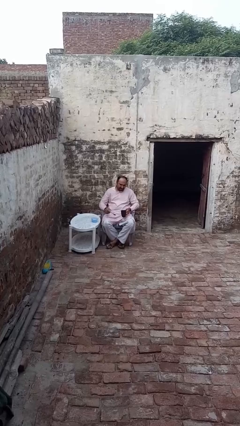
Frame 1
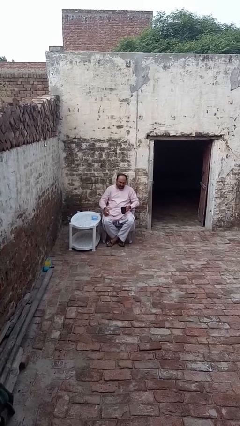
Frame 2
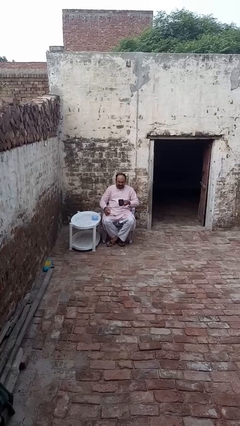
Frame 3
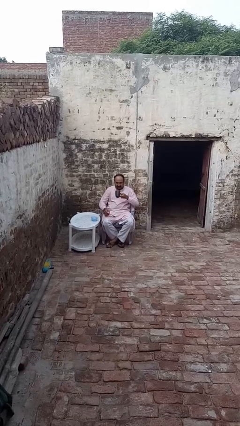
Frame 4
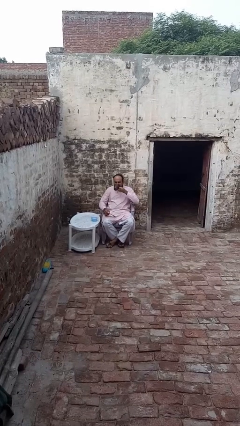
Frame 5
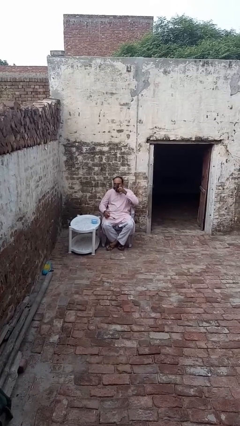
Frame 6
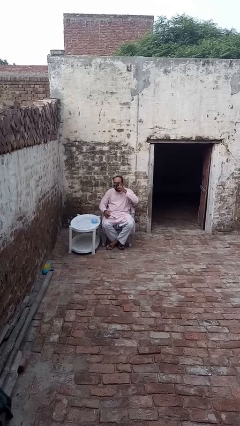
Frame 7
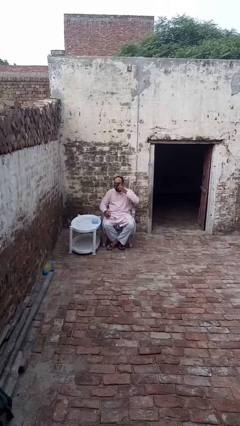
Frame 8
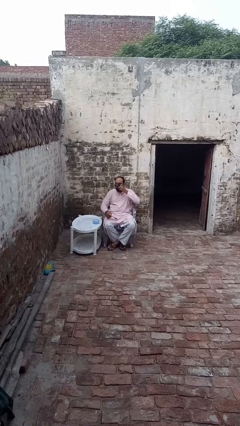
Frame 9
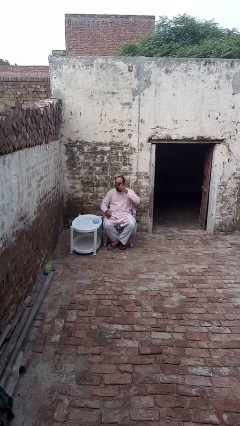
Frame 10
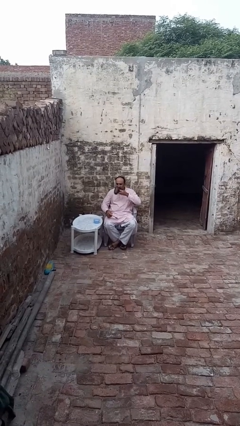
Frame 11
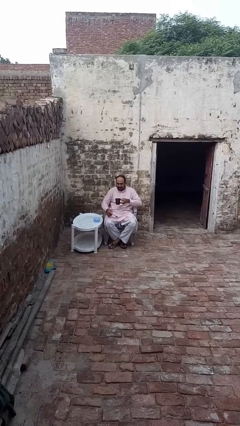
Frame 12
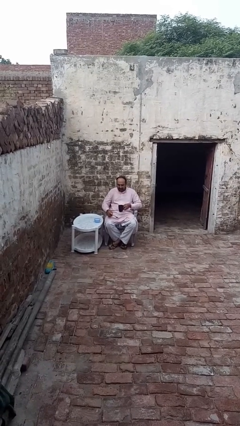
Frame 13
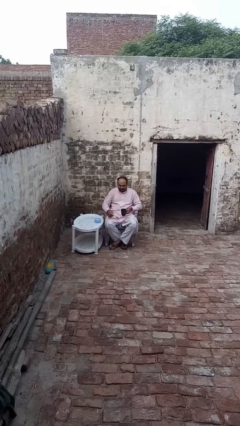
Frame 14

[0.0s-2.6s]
person drinks from mug

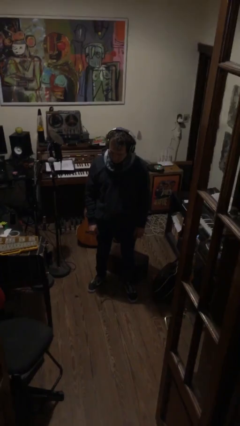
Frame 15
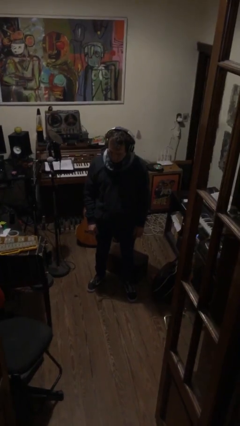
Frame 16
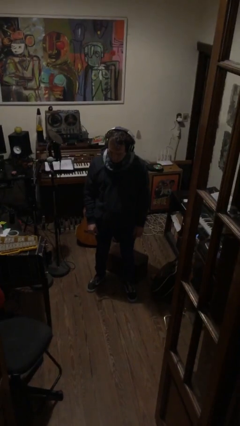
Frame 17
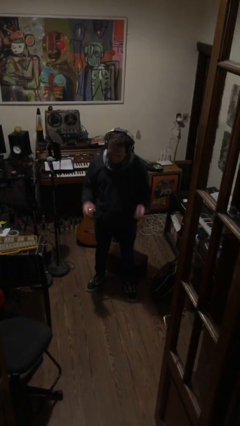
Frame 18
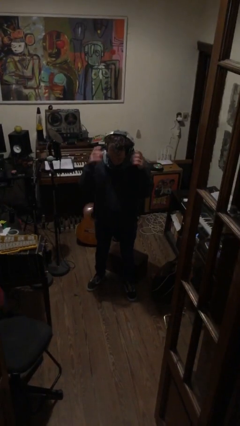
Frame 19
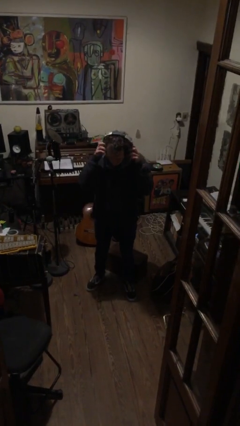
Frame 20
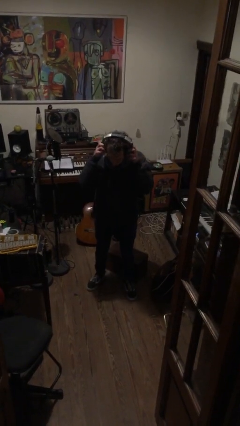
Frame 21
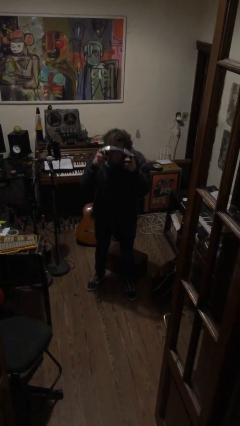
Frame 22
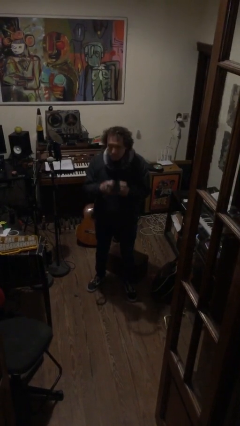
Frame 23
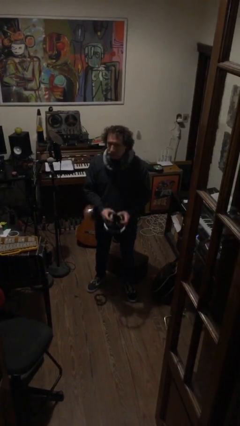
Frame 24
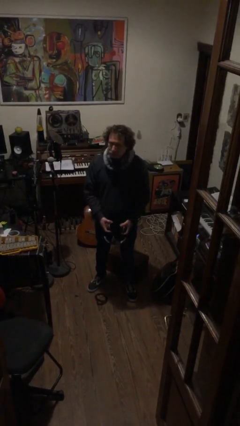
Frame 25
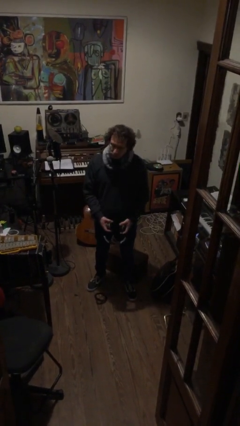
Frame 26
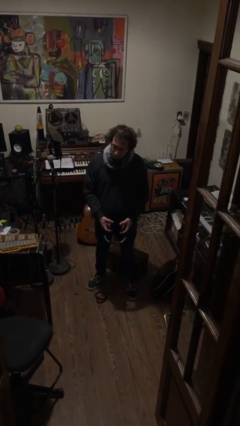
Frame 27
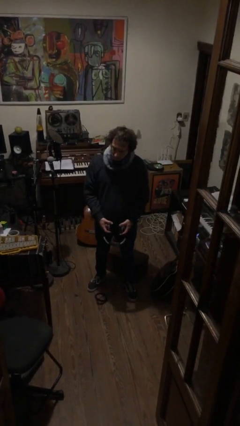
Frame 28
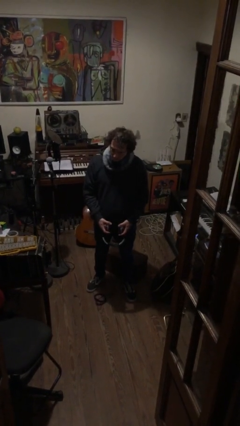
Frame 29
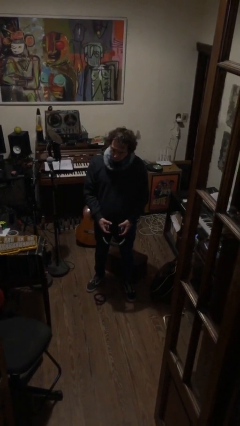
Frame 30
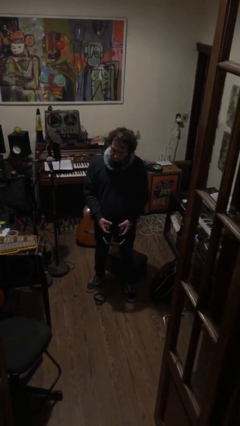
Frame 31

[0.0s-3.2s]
person takes off headphones

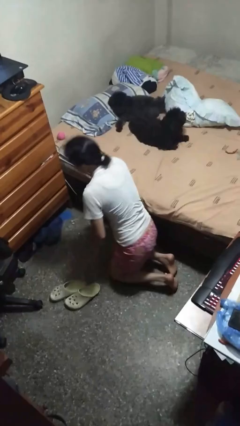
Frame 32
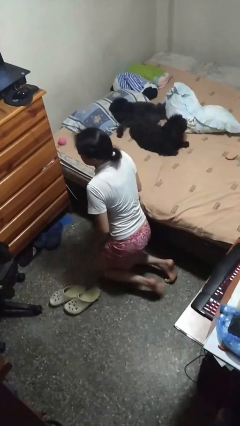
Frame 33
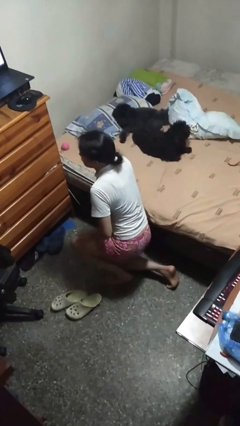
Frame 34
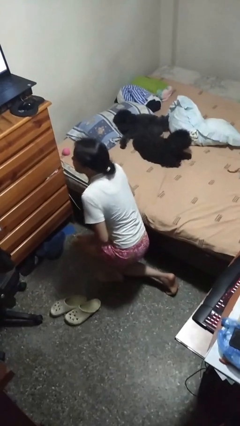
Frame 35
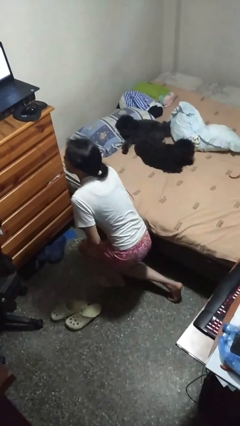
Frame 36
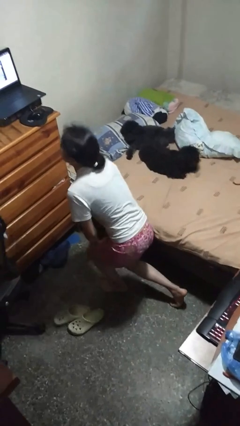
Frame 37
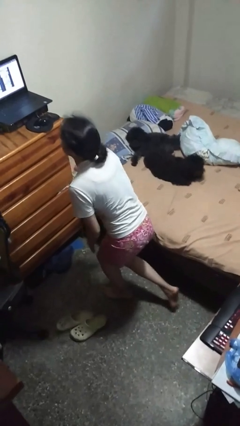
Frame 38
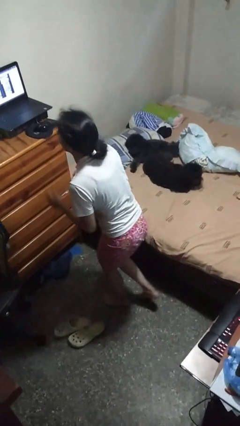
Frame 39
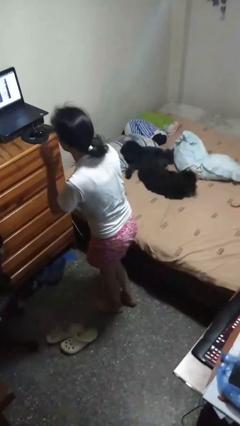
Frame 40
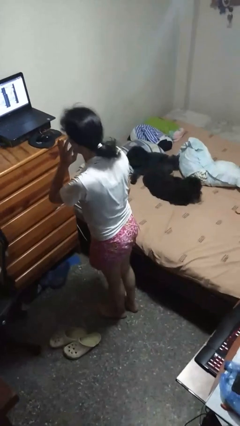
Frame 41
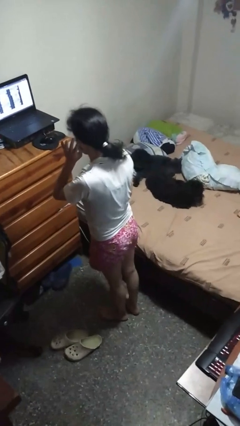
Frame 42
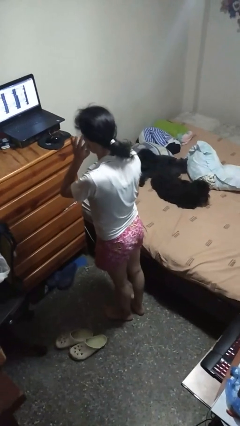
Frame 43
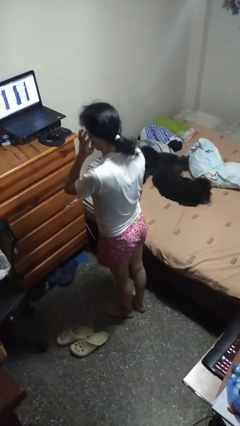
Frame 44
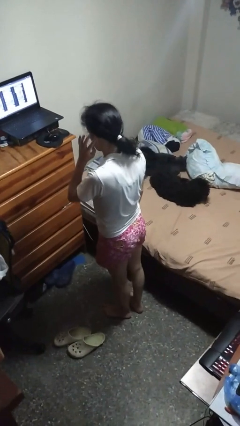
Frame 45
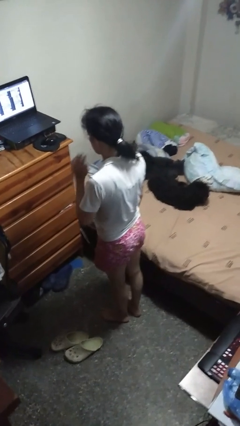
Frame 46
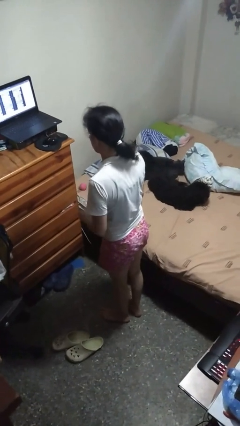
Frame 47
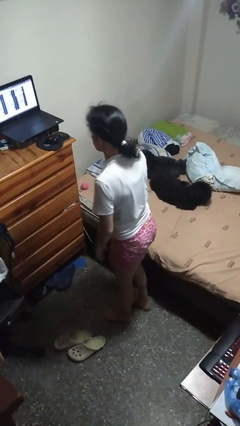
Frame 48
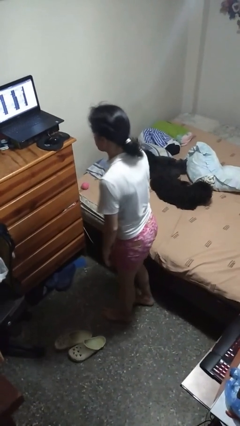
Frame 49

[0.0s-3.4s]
person stands up from floor

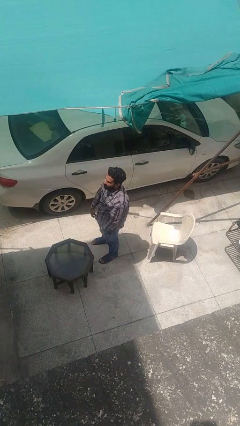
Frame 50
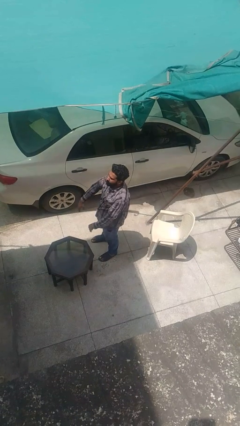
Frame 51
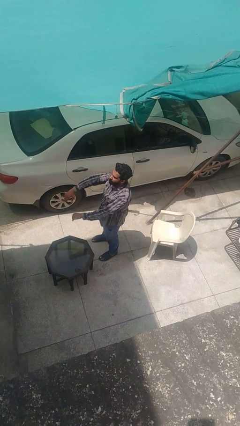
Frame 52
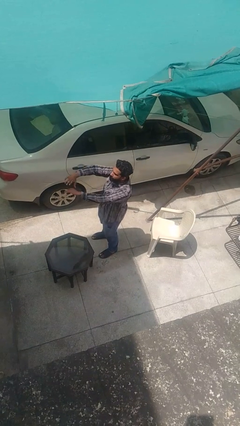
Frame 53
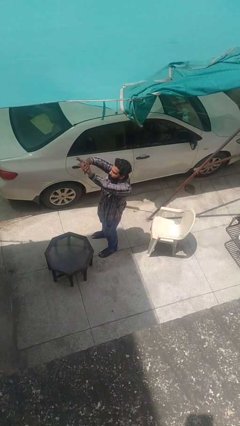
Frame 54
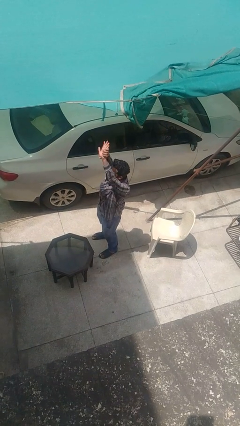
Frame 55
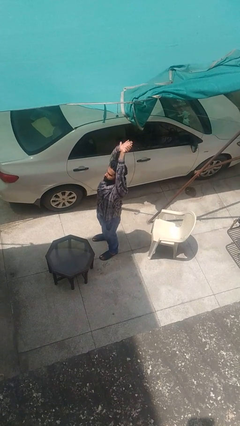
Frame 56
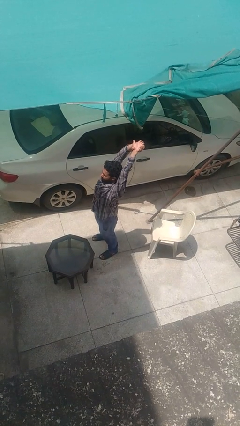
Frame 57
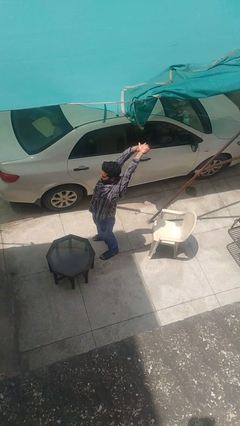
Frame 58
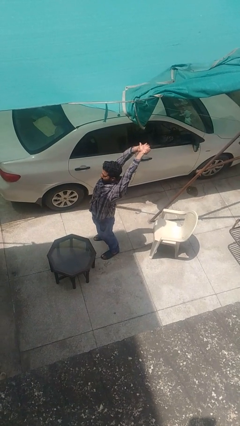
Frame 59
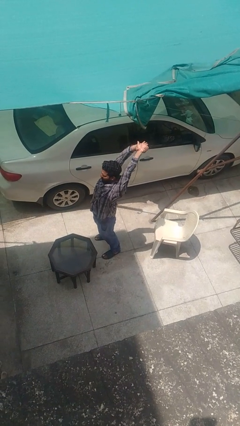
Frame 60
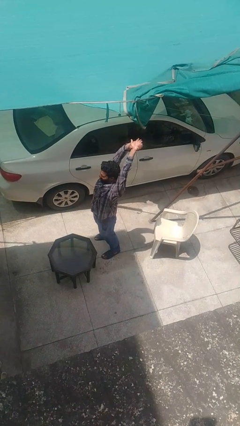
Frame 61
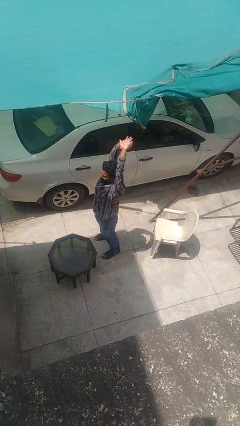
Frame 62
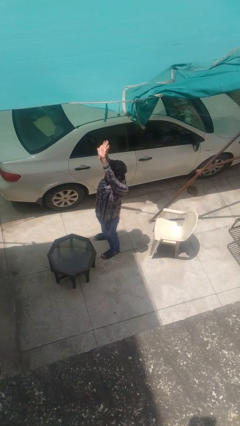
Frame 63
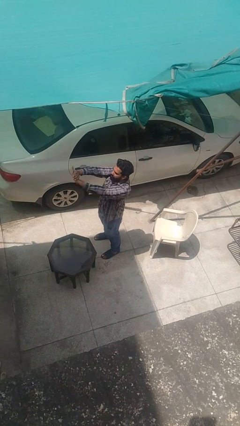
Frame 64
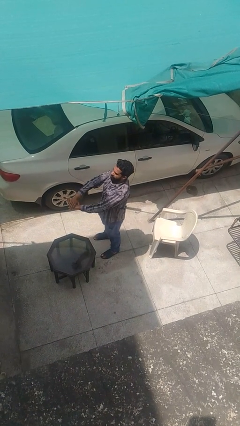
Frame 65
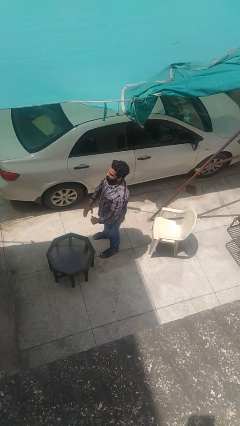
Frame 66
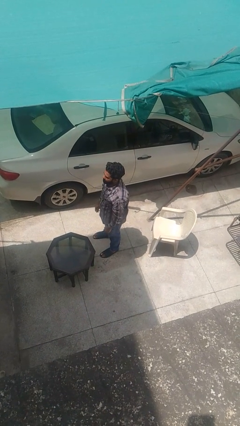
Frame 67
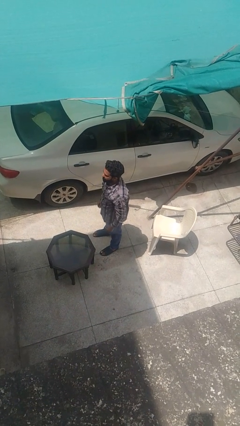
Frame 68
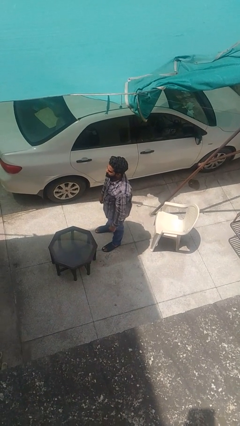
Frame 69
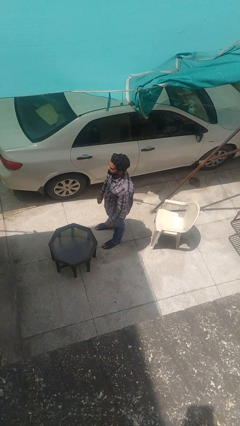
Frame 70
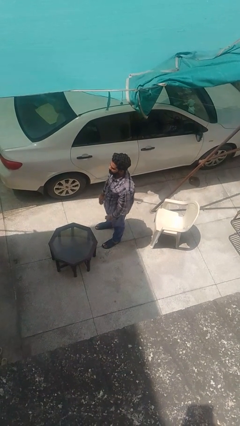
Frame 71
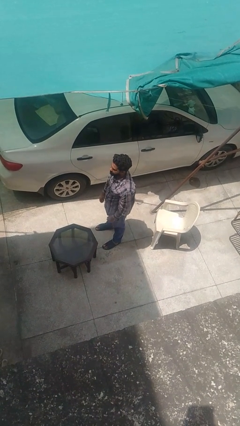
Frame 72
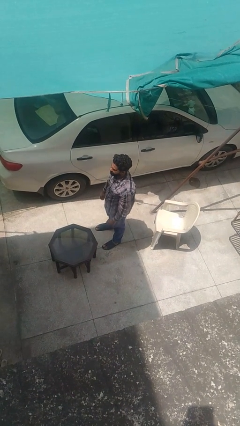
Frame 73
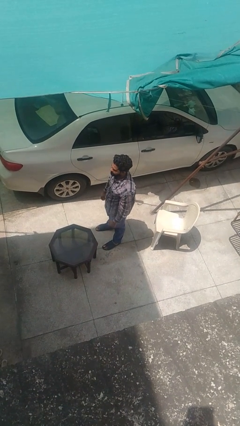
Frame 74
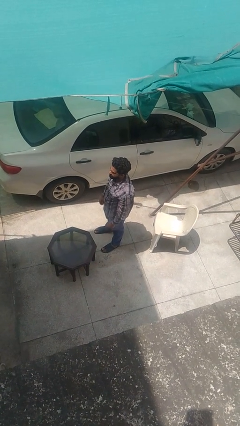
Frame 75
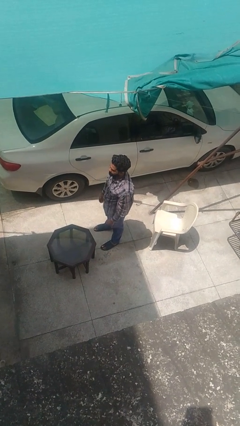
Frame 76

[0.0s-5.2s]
person stretches arms over head

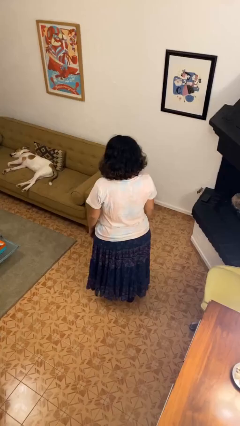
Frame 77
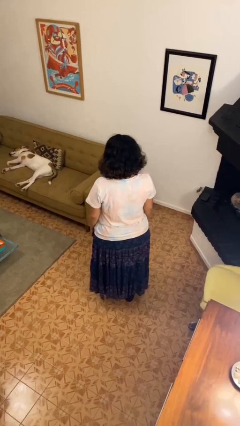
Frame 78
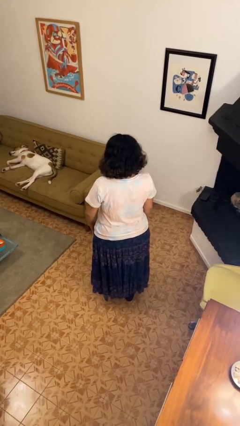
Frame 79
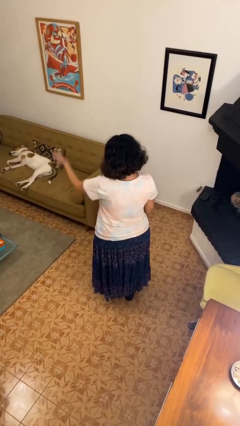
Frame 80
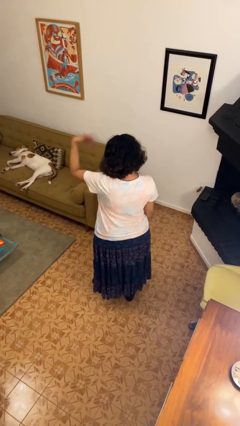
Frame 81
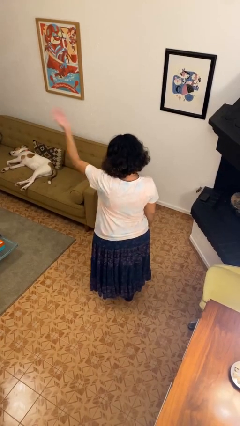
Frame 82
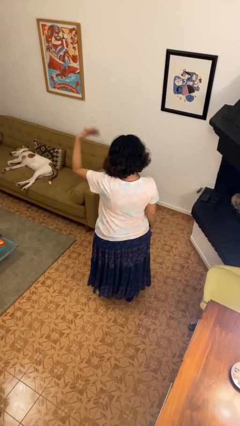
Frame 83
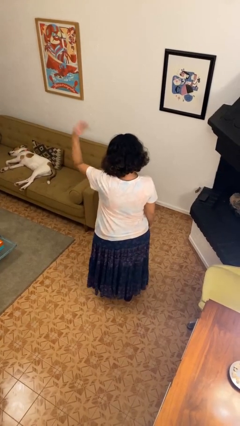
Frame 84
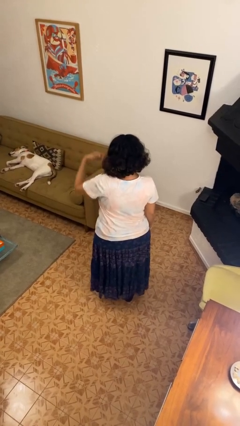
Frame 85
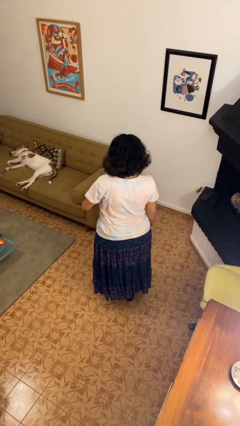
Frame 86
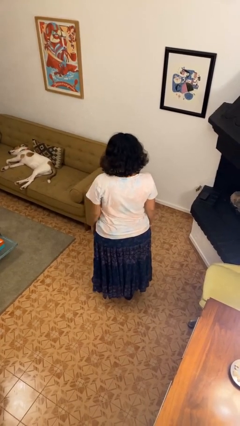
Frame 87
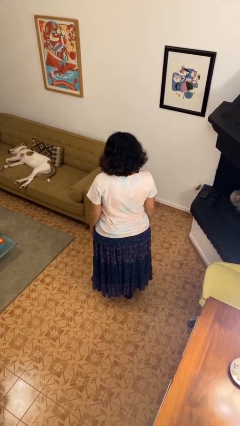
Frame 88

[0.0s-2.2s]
person gestures come here

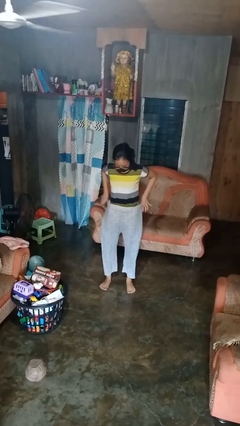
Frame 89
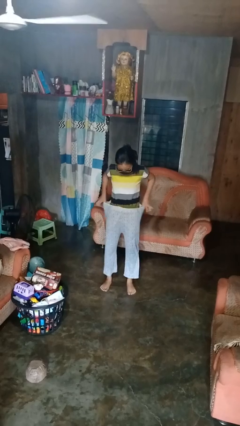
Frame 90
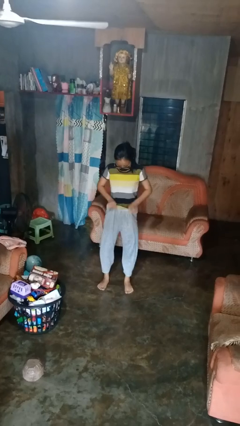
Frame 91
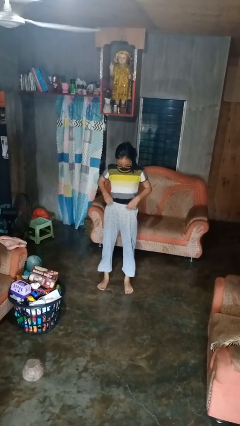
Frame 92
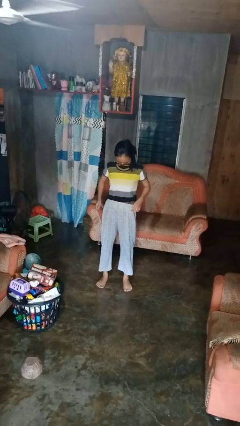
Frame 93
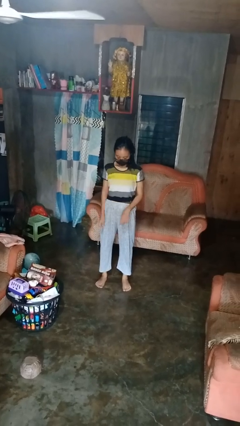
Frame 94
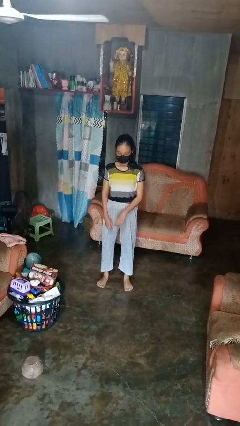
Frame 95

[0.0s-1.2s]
person tucks in shirt
